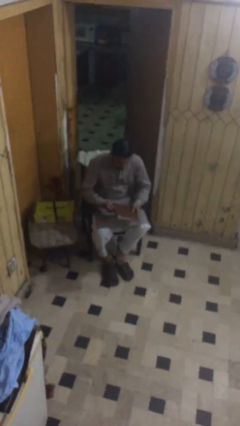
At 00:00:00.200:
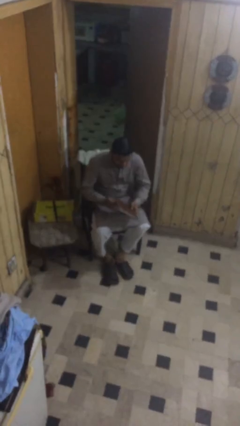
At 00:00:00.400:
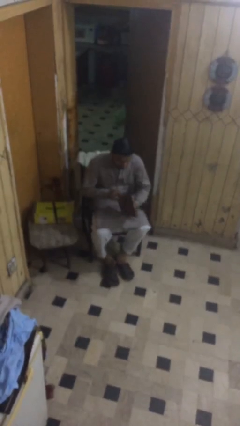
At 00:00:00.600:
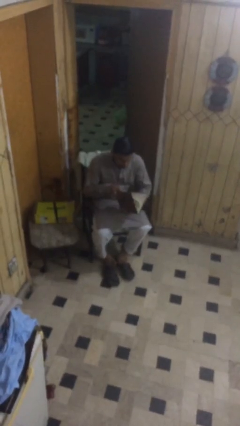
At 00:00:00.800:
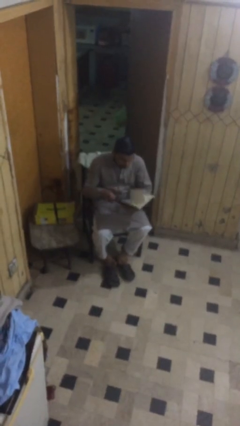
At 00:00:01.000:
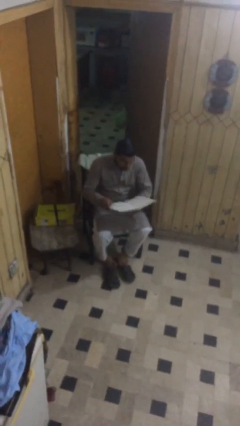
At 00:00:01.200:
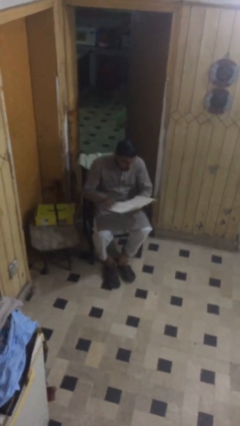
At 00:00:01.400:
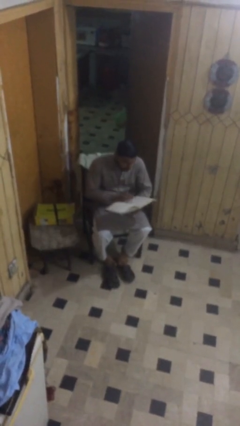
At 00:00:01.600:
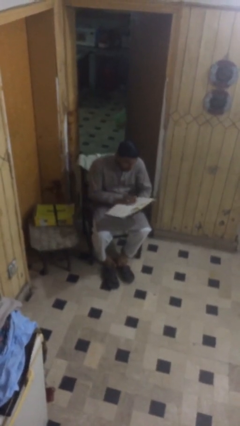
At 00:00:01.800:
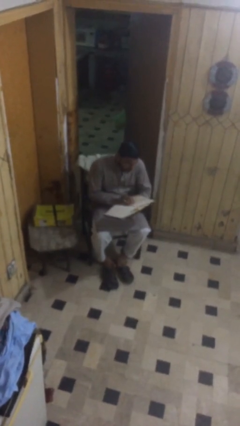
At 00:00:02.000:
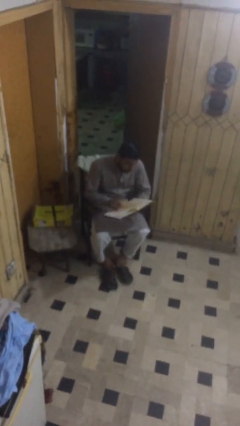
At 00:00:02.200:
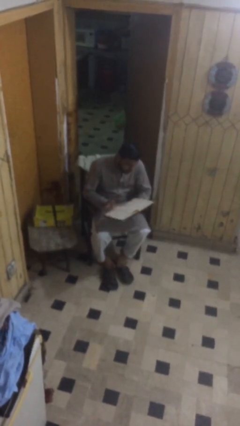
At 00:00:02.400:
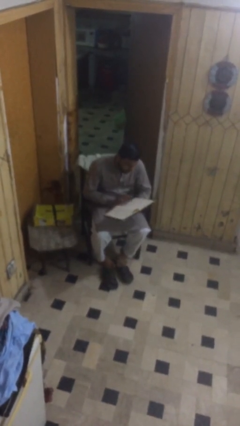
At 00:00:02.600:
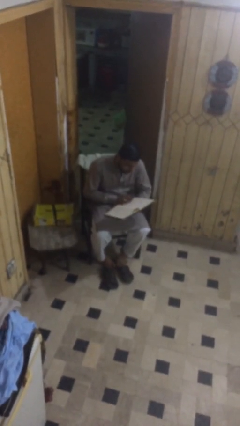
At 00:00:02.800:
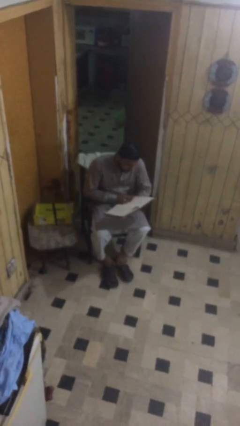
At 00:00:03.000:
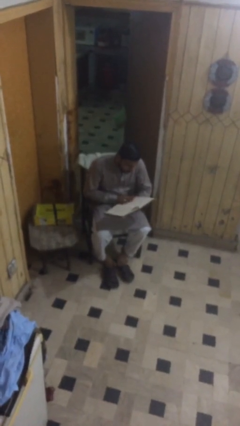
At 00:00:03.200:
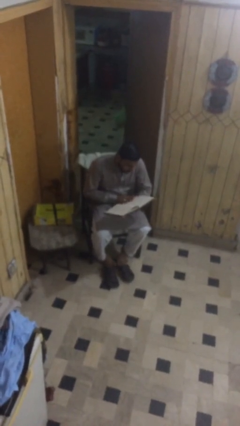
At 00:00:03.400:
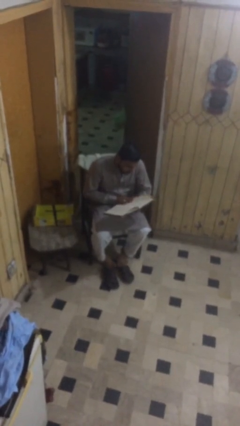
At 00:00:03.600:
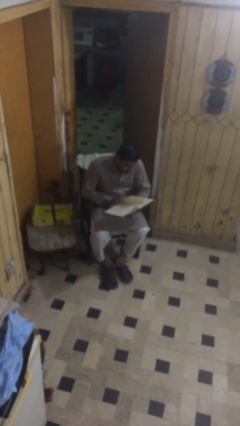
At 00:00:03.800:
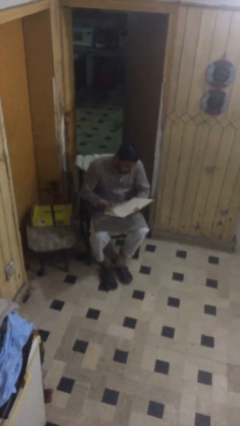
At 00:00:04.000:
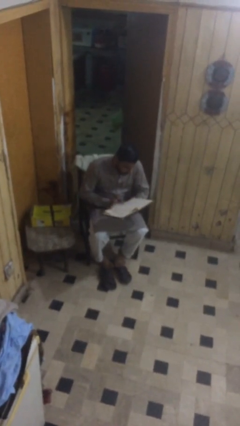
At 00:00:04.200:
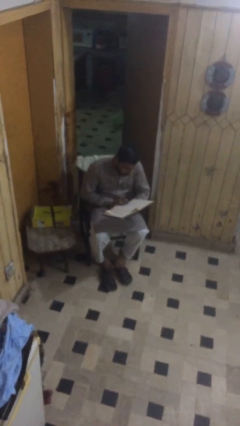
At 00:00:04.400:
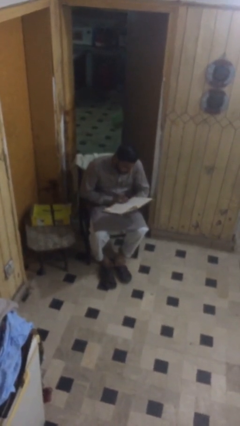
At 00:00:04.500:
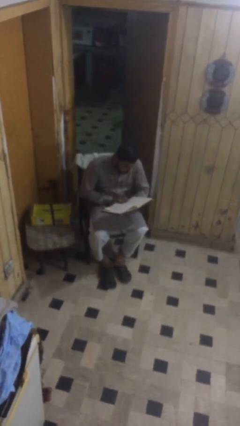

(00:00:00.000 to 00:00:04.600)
person reads document

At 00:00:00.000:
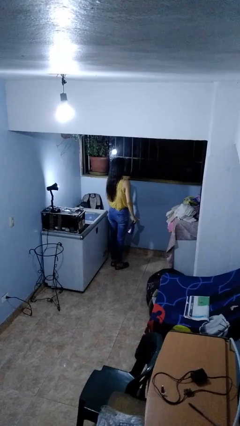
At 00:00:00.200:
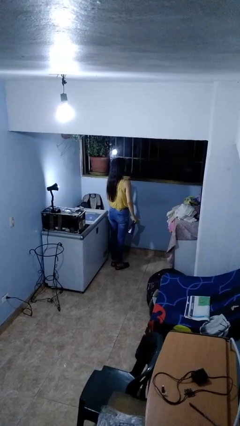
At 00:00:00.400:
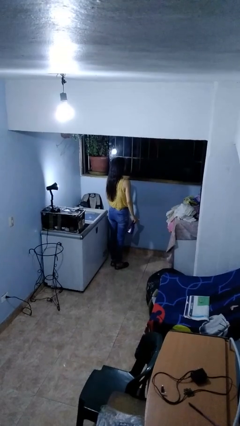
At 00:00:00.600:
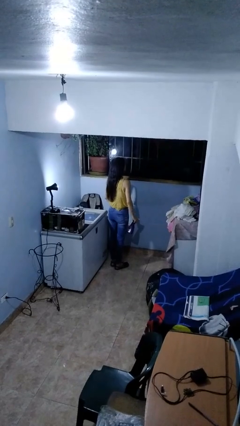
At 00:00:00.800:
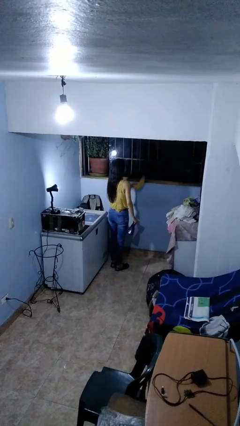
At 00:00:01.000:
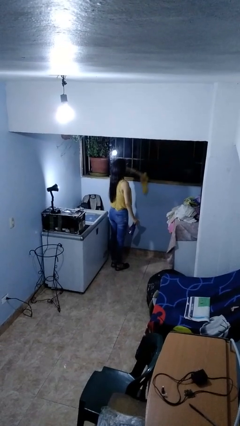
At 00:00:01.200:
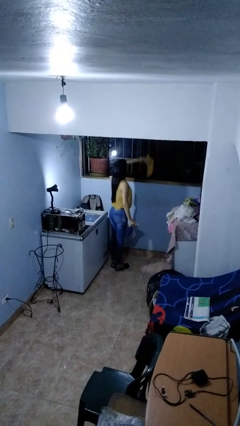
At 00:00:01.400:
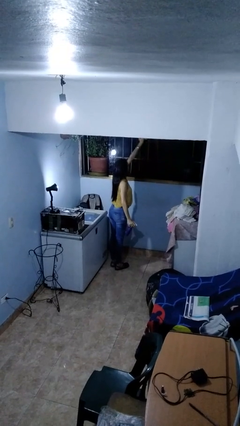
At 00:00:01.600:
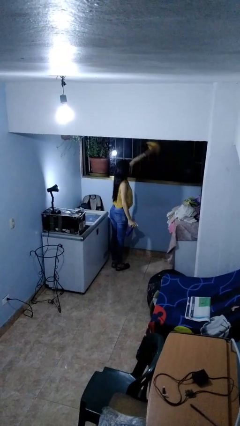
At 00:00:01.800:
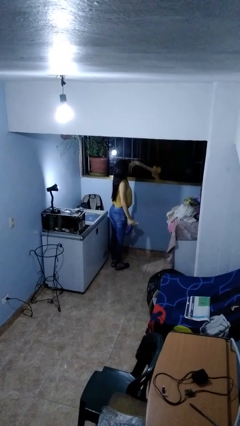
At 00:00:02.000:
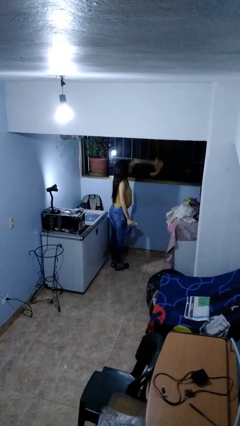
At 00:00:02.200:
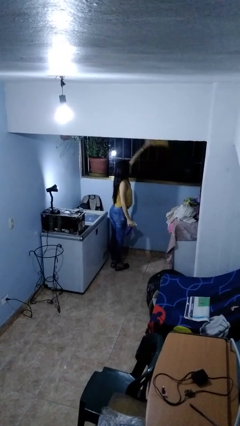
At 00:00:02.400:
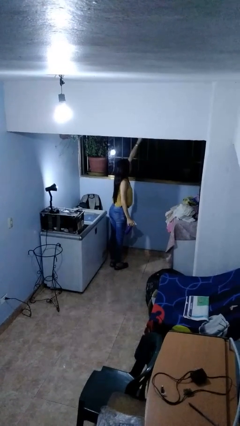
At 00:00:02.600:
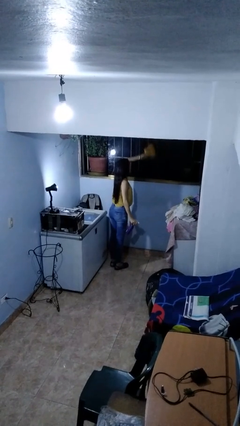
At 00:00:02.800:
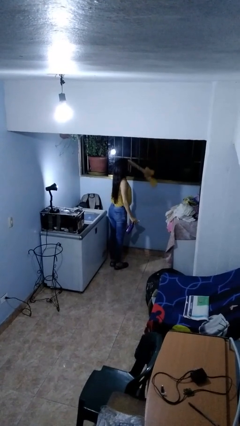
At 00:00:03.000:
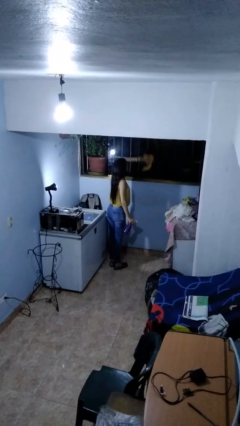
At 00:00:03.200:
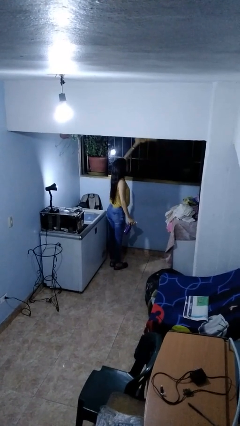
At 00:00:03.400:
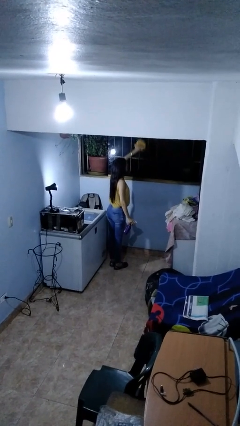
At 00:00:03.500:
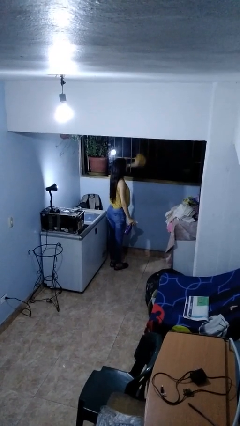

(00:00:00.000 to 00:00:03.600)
person washes window

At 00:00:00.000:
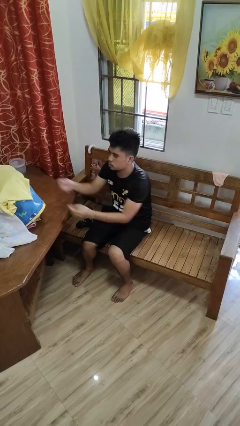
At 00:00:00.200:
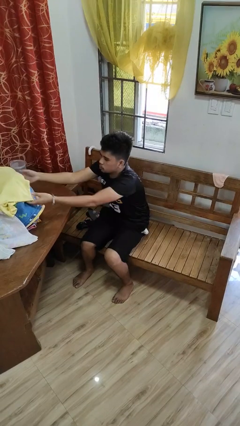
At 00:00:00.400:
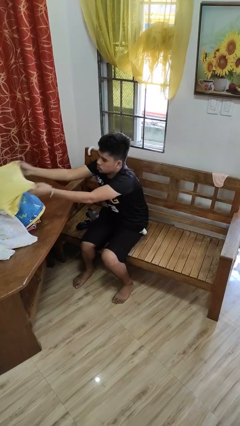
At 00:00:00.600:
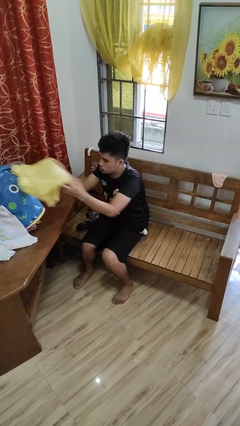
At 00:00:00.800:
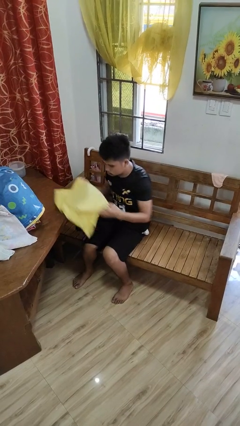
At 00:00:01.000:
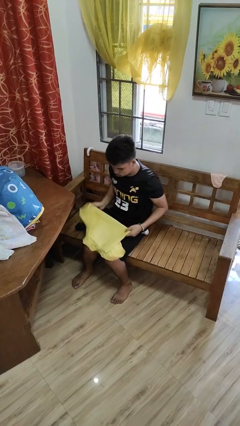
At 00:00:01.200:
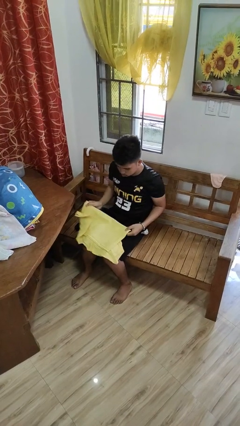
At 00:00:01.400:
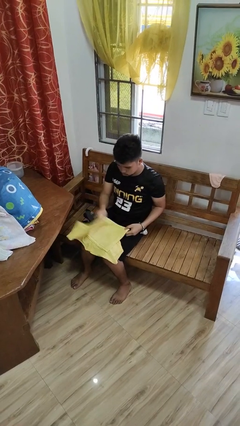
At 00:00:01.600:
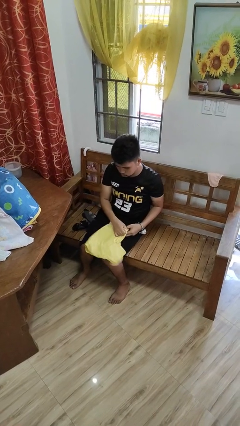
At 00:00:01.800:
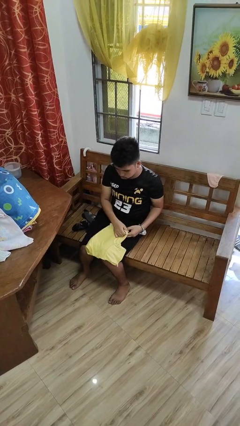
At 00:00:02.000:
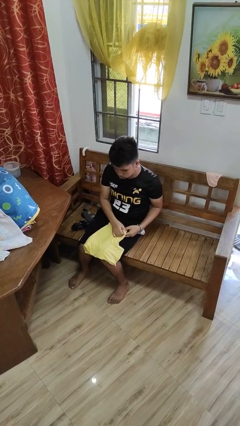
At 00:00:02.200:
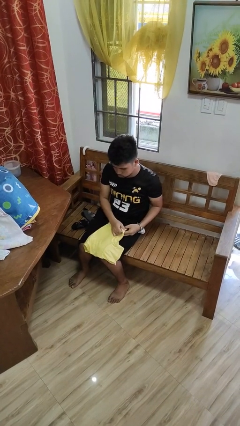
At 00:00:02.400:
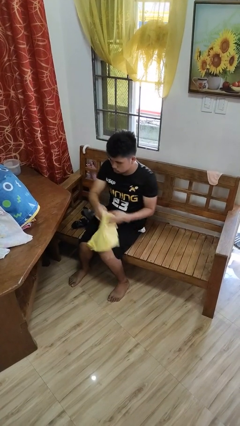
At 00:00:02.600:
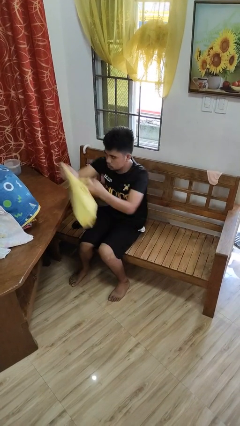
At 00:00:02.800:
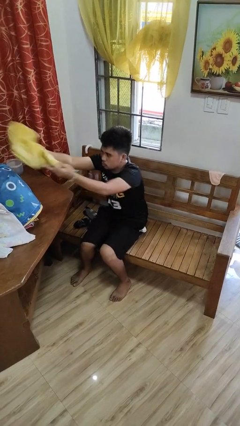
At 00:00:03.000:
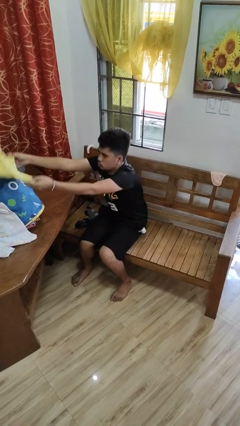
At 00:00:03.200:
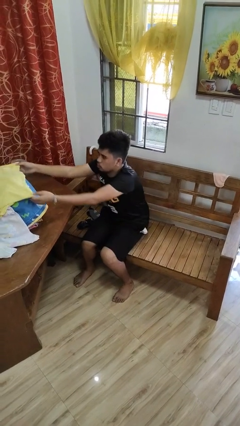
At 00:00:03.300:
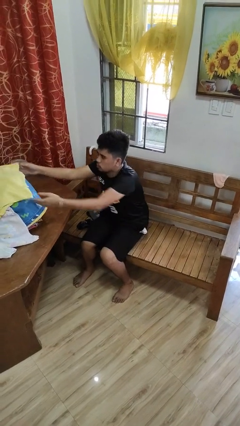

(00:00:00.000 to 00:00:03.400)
person folds shirt

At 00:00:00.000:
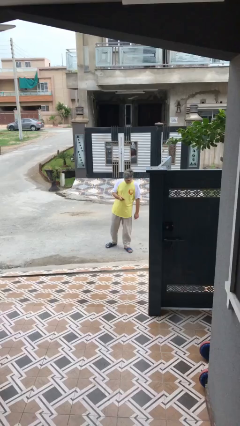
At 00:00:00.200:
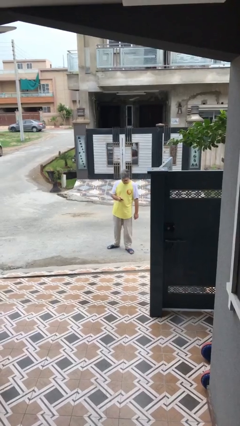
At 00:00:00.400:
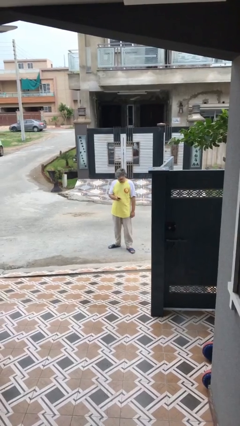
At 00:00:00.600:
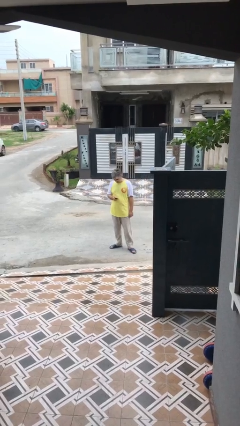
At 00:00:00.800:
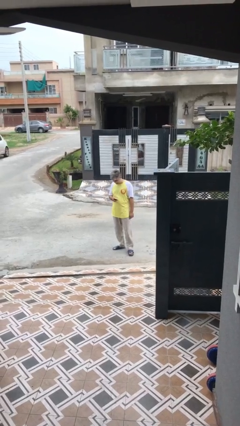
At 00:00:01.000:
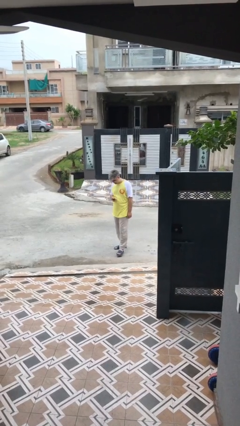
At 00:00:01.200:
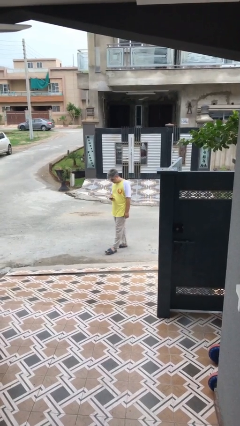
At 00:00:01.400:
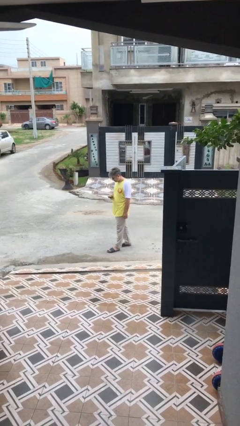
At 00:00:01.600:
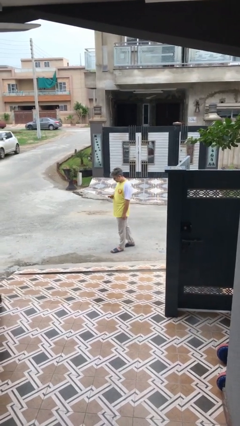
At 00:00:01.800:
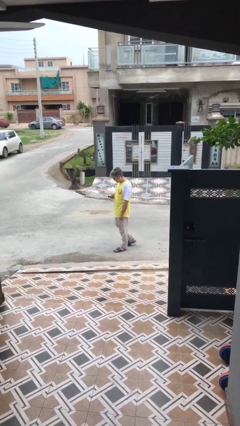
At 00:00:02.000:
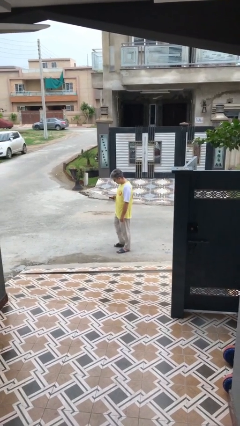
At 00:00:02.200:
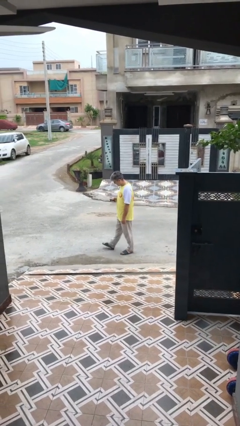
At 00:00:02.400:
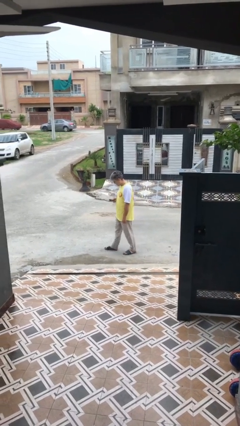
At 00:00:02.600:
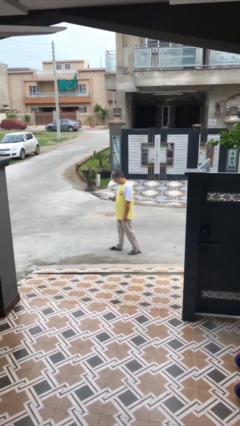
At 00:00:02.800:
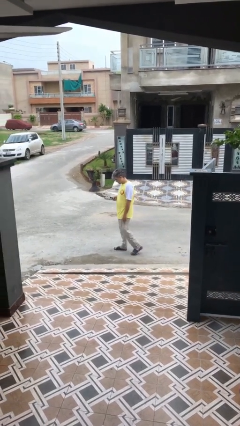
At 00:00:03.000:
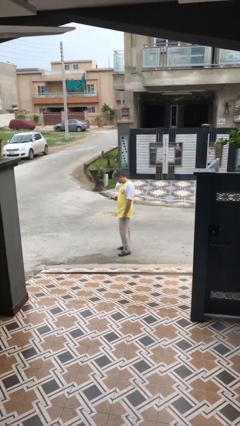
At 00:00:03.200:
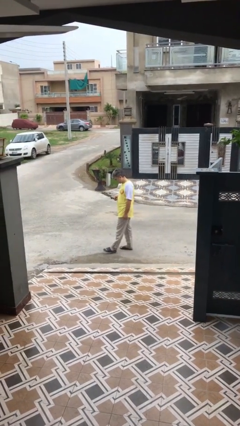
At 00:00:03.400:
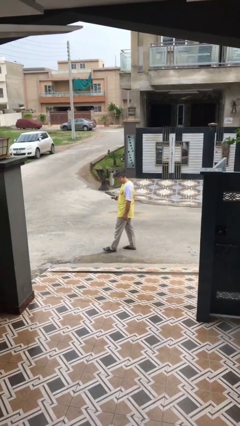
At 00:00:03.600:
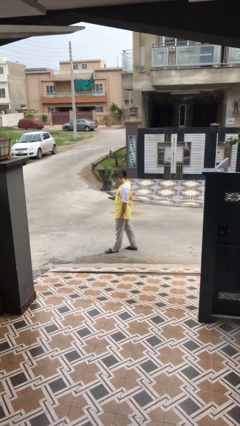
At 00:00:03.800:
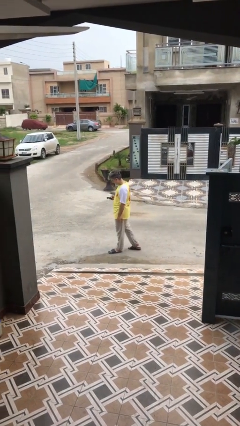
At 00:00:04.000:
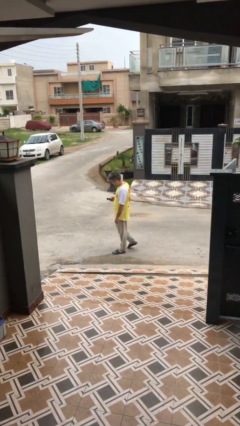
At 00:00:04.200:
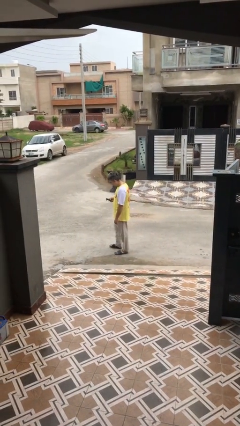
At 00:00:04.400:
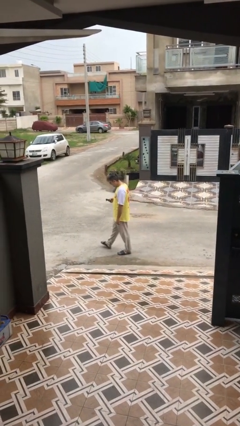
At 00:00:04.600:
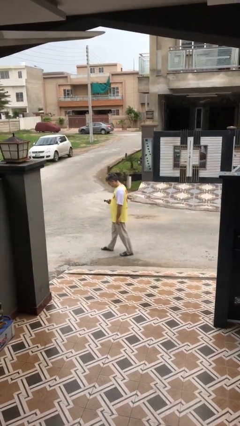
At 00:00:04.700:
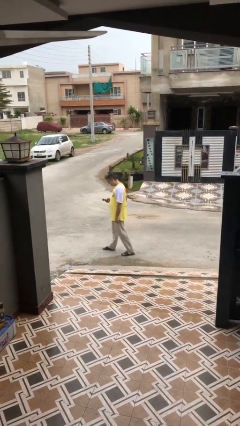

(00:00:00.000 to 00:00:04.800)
person texts on phone

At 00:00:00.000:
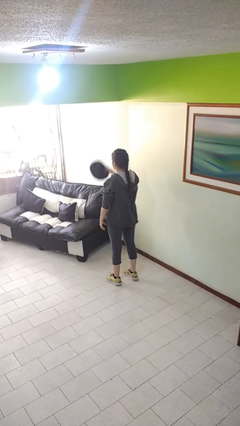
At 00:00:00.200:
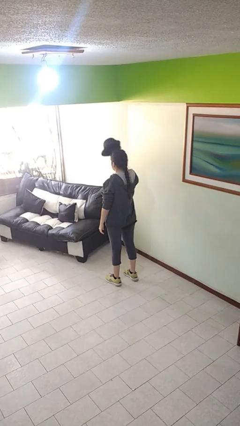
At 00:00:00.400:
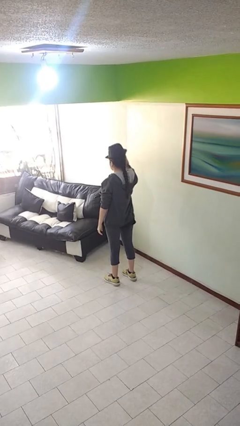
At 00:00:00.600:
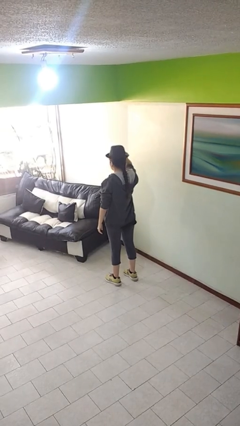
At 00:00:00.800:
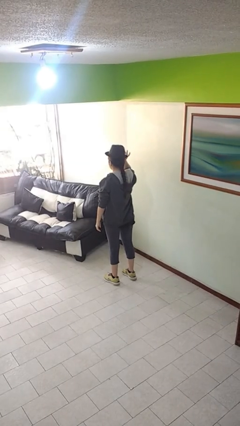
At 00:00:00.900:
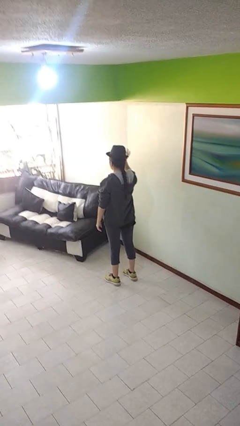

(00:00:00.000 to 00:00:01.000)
person puts on hat
